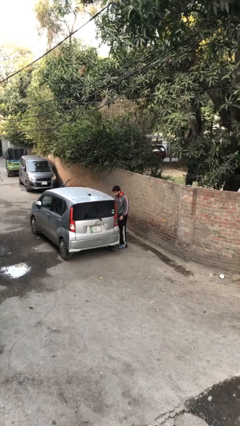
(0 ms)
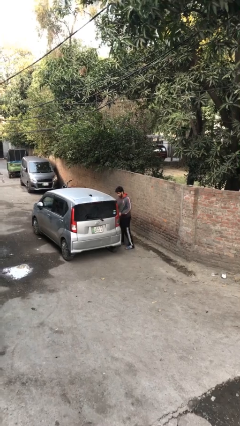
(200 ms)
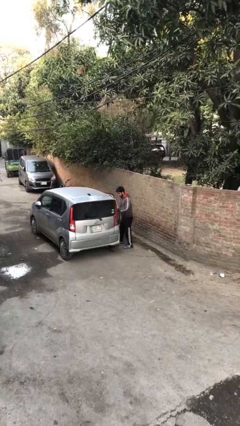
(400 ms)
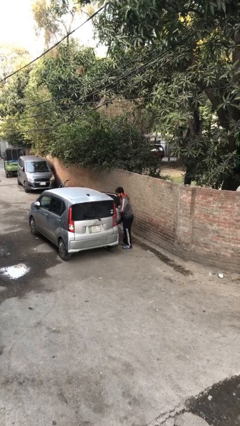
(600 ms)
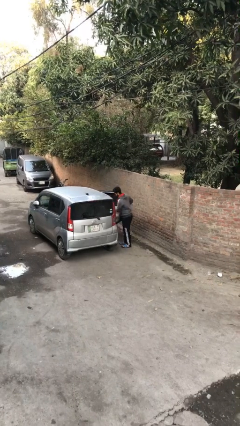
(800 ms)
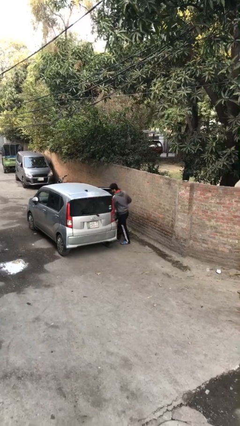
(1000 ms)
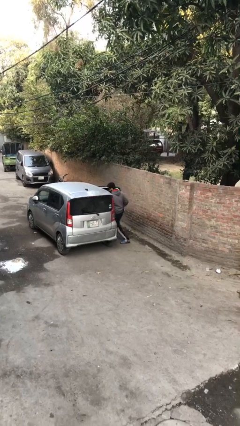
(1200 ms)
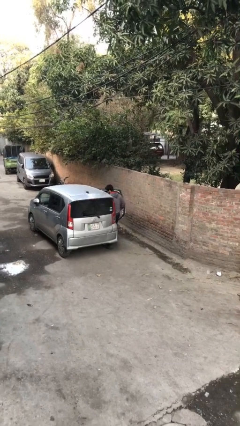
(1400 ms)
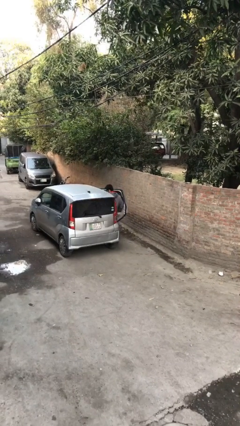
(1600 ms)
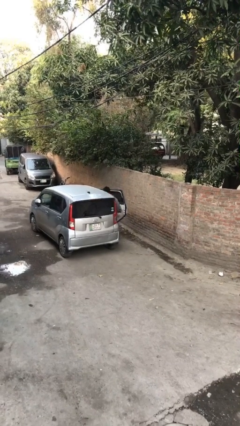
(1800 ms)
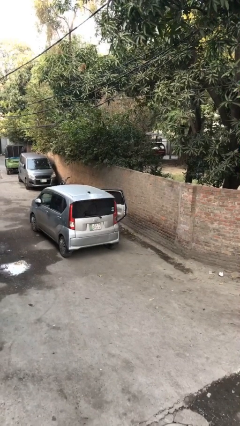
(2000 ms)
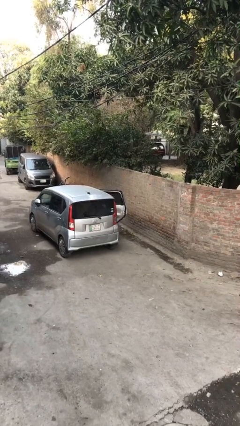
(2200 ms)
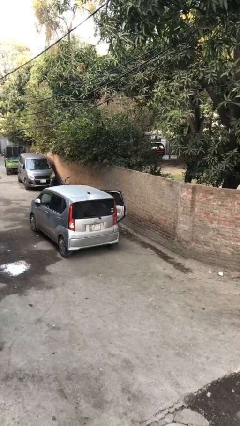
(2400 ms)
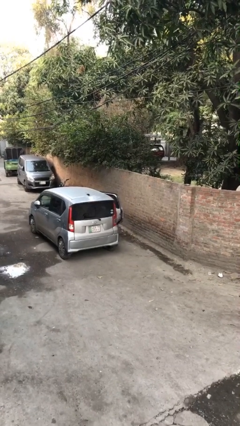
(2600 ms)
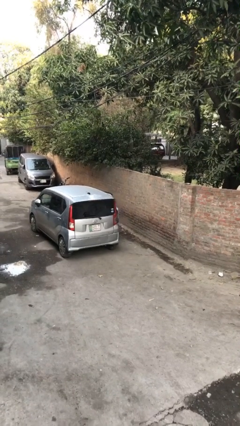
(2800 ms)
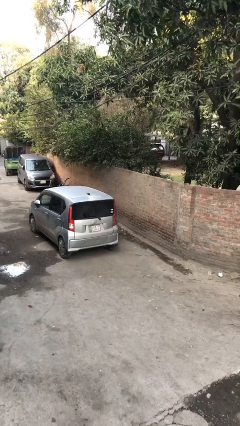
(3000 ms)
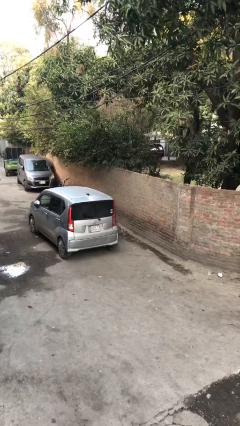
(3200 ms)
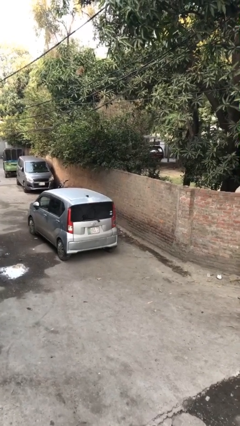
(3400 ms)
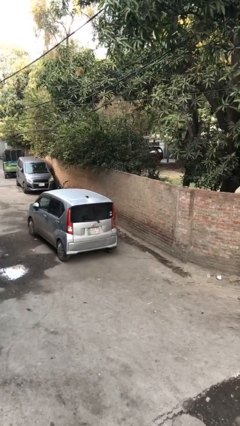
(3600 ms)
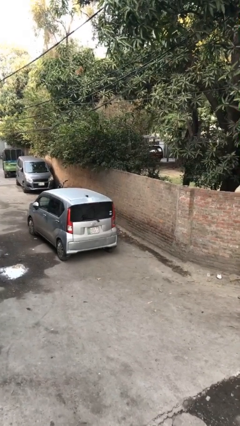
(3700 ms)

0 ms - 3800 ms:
car picks up person

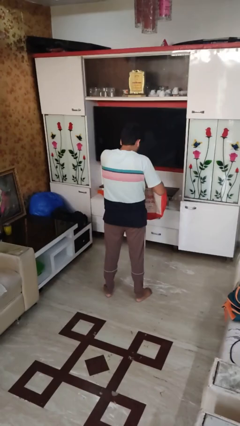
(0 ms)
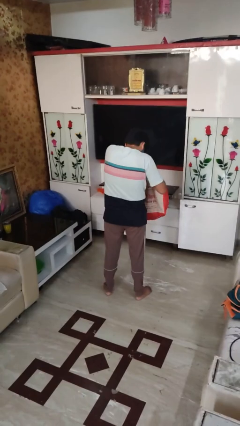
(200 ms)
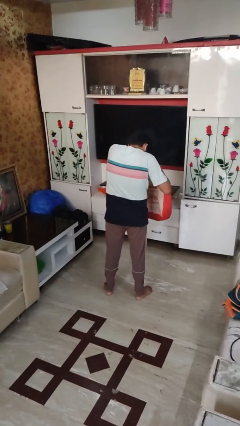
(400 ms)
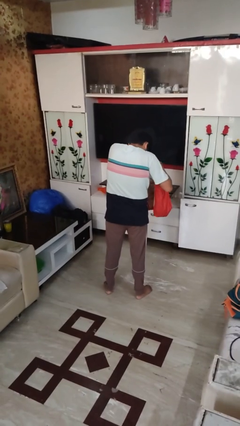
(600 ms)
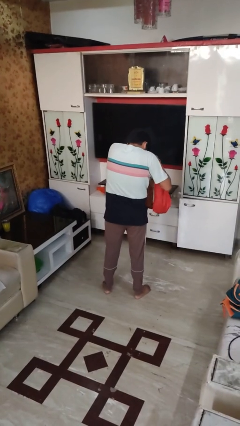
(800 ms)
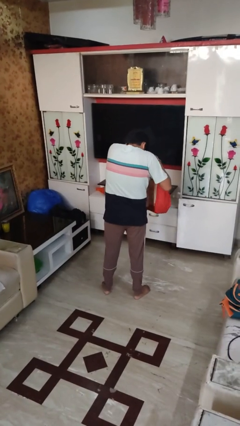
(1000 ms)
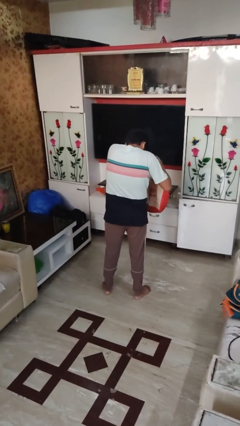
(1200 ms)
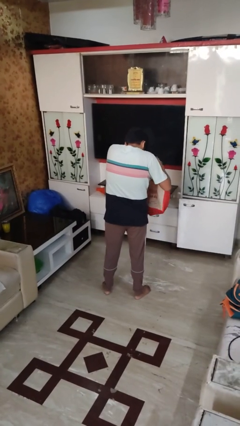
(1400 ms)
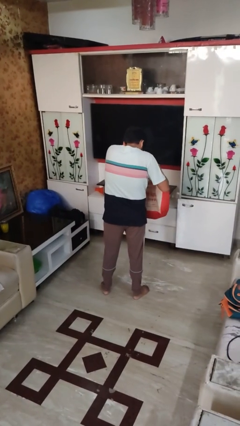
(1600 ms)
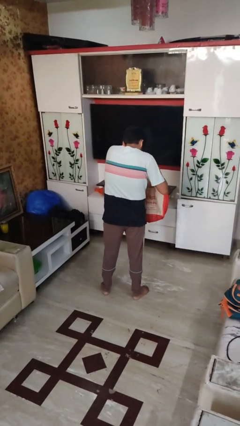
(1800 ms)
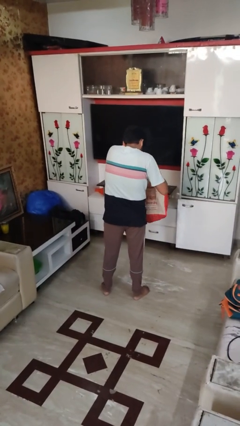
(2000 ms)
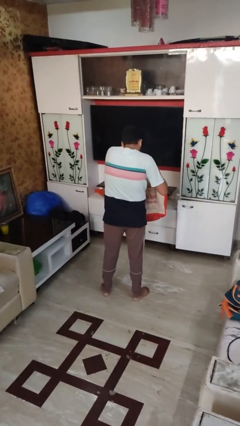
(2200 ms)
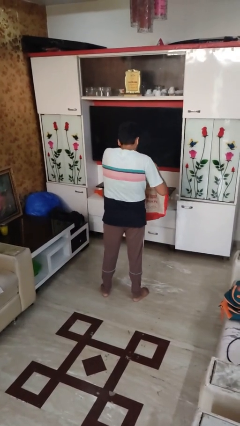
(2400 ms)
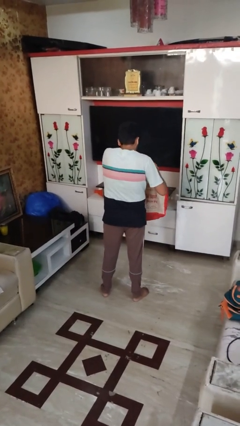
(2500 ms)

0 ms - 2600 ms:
person searches in bag

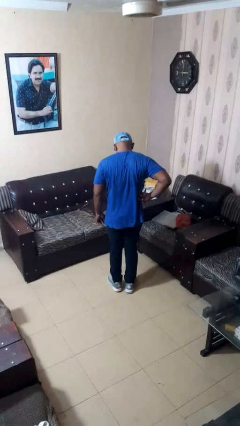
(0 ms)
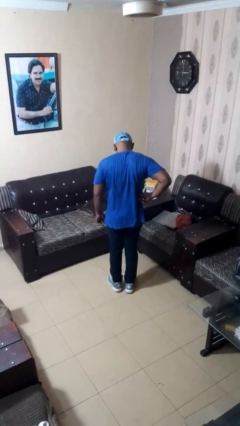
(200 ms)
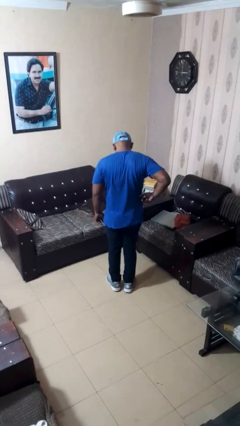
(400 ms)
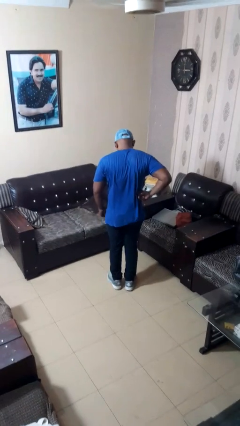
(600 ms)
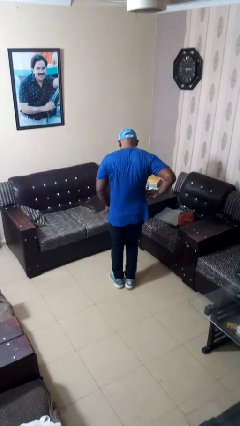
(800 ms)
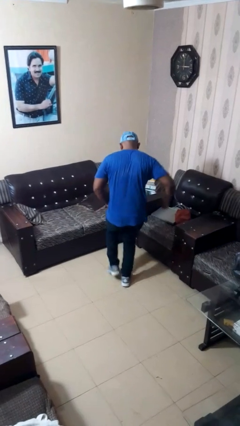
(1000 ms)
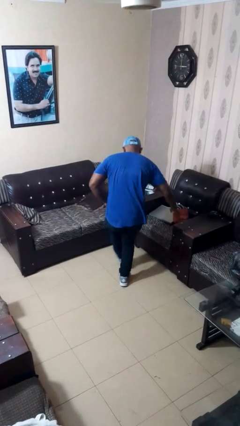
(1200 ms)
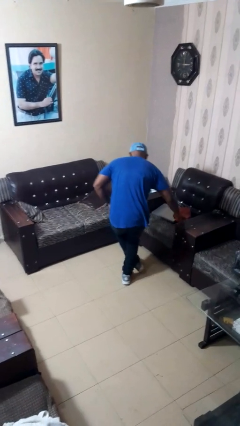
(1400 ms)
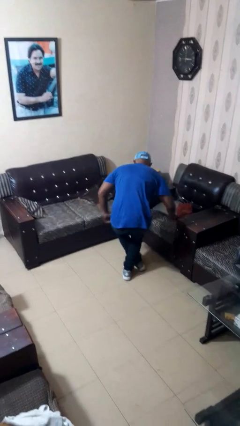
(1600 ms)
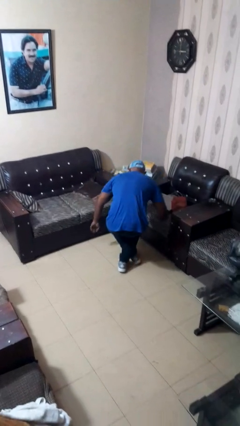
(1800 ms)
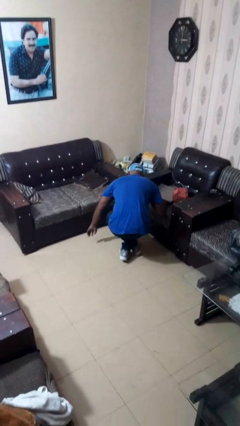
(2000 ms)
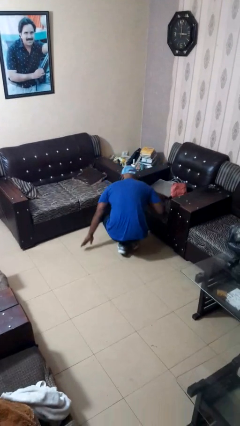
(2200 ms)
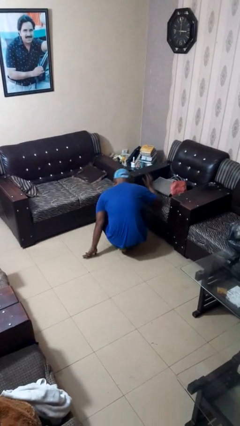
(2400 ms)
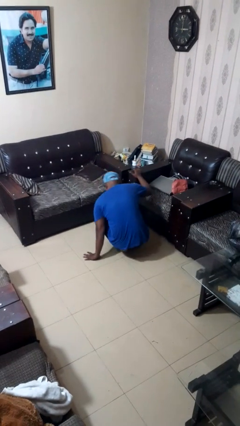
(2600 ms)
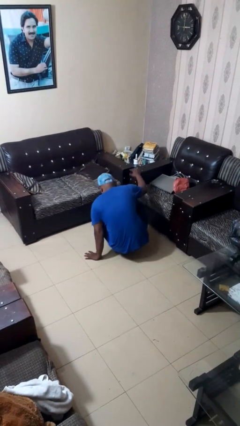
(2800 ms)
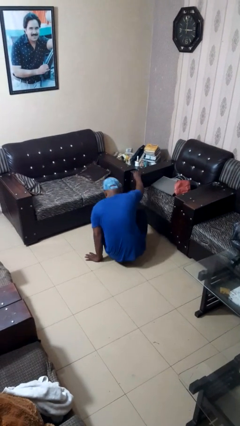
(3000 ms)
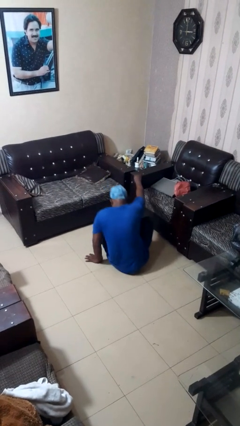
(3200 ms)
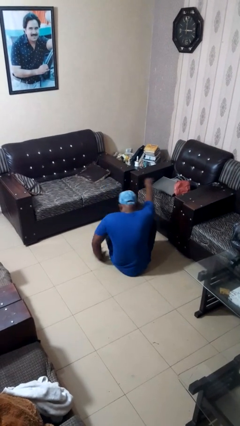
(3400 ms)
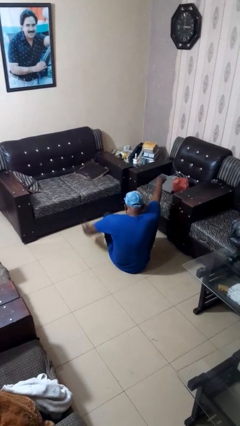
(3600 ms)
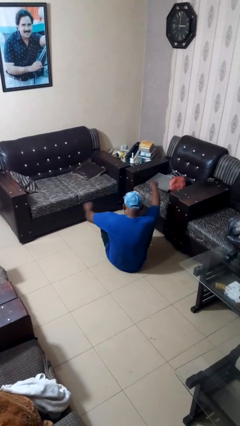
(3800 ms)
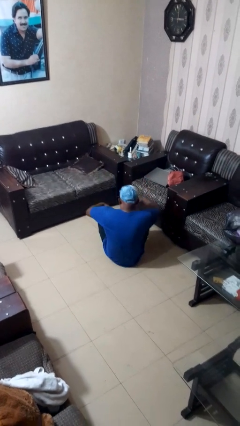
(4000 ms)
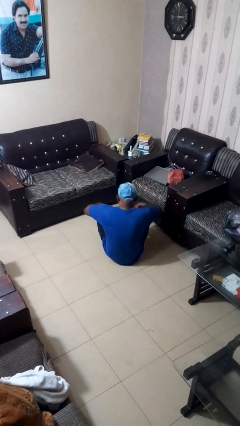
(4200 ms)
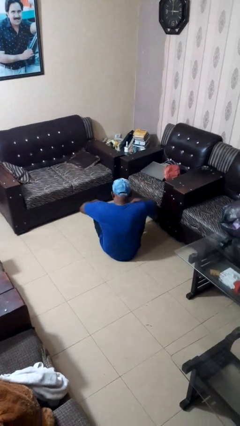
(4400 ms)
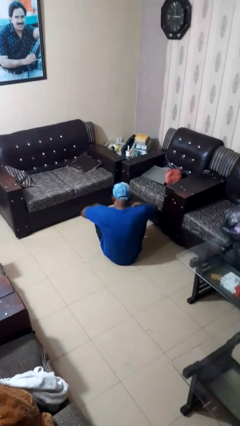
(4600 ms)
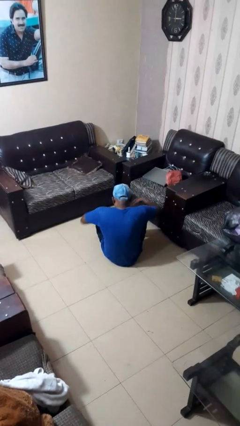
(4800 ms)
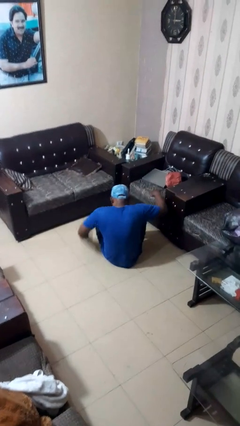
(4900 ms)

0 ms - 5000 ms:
person sits crisscross

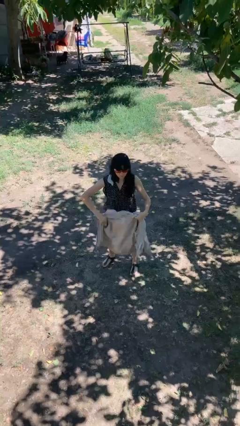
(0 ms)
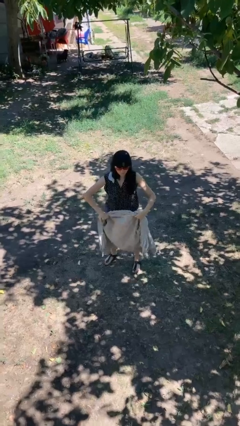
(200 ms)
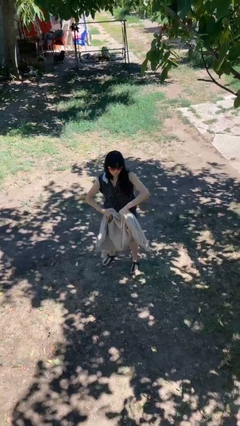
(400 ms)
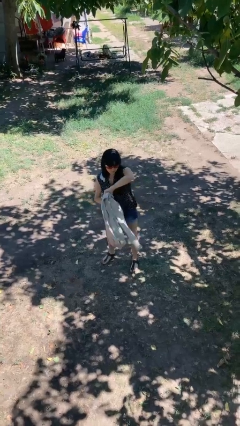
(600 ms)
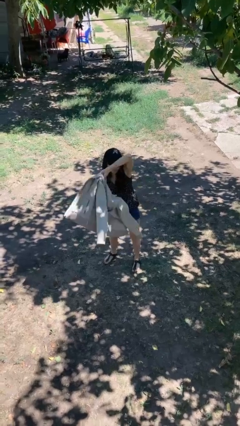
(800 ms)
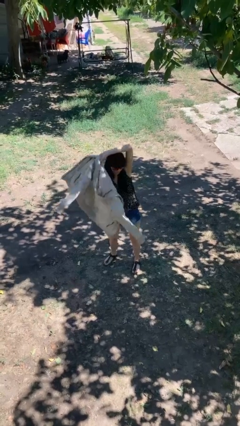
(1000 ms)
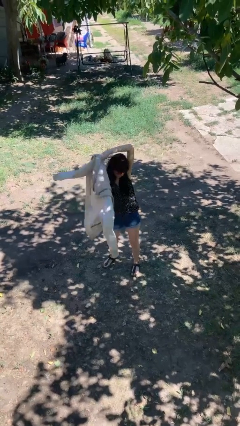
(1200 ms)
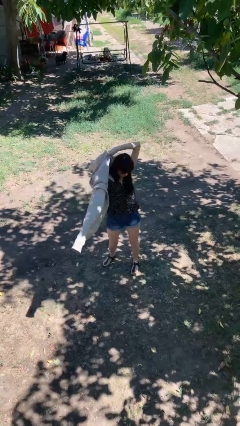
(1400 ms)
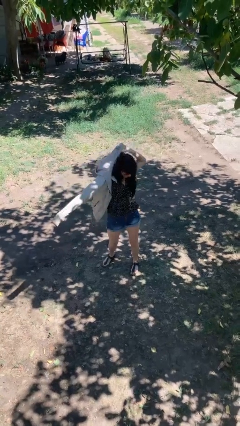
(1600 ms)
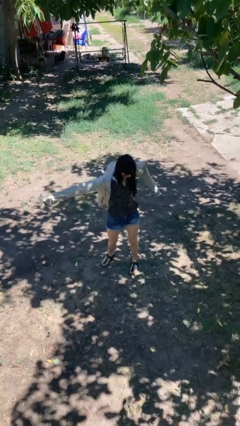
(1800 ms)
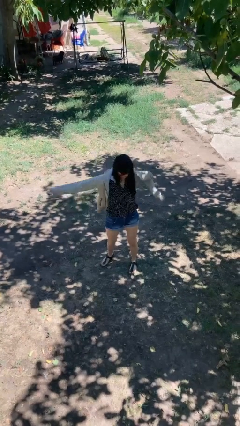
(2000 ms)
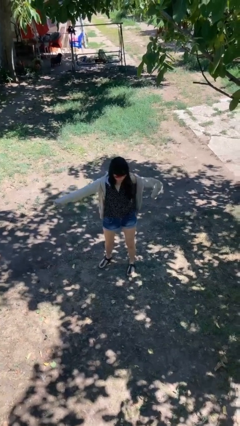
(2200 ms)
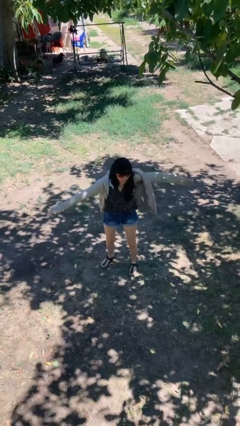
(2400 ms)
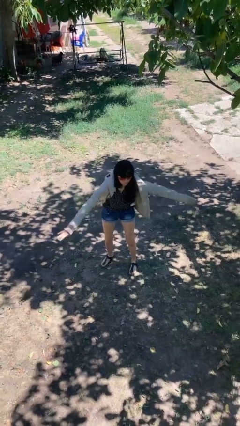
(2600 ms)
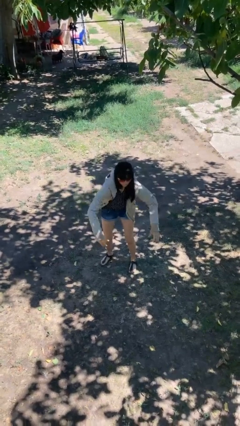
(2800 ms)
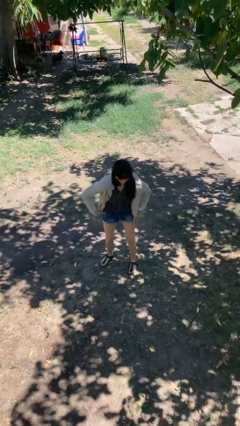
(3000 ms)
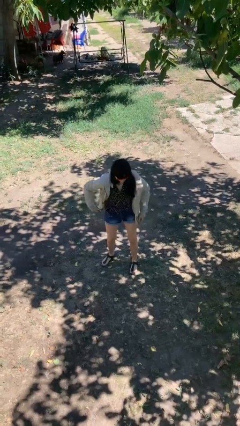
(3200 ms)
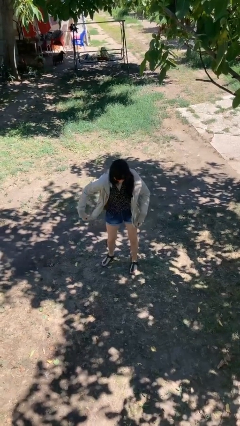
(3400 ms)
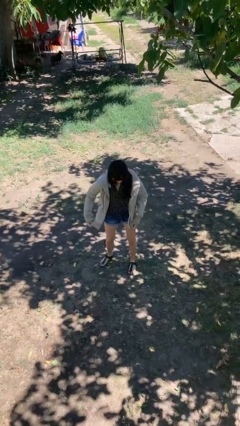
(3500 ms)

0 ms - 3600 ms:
person puts on jacket

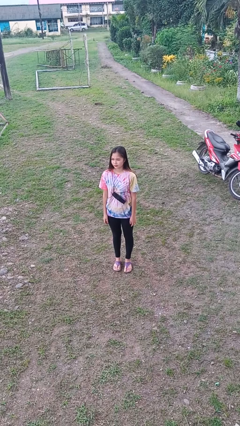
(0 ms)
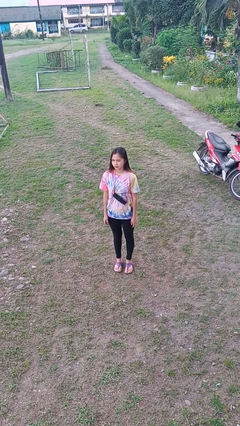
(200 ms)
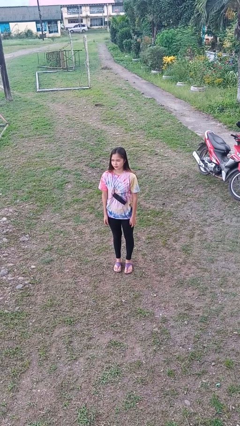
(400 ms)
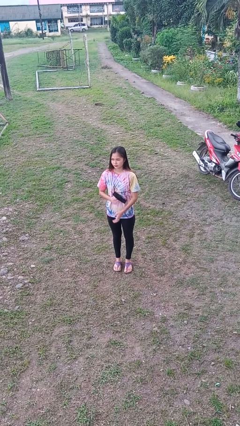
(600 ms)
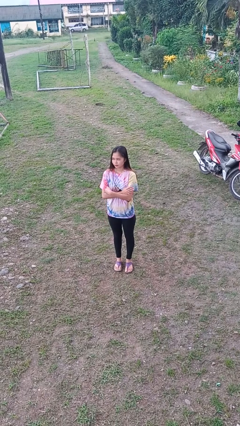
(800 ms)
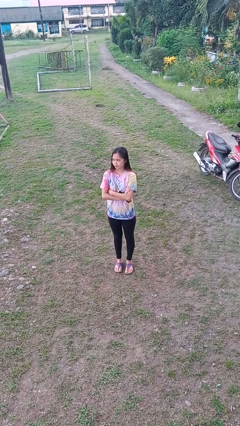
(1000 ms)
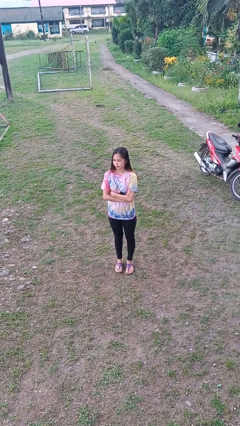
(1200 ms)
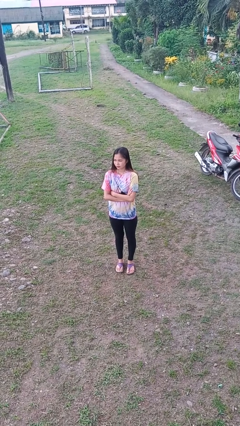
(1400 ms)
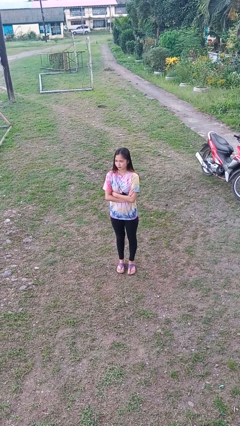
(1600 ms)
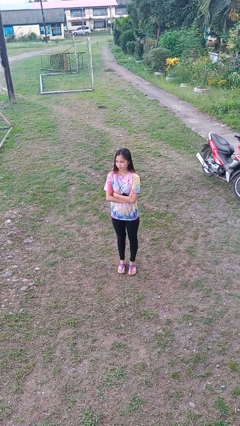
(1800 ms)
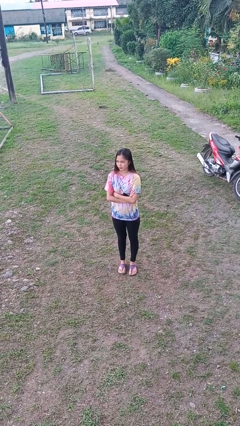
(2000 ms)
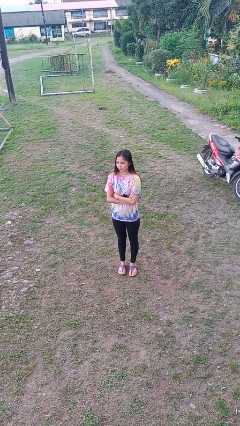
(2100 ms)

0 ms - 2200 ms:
person crosses arms

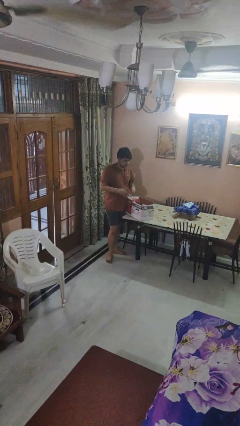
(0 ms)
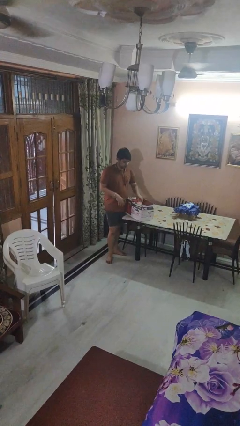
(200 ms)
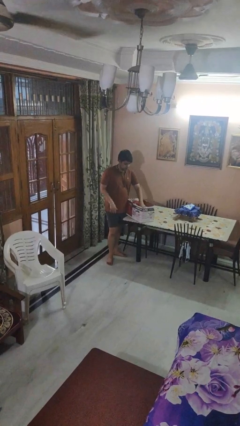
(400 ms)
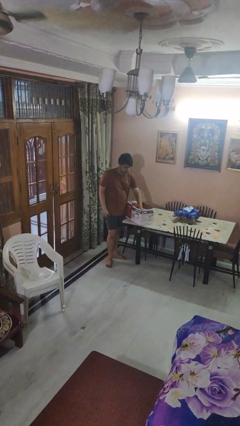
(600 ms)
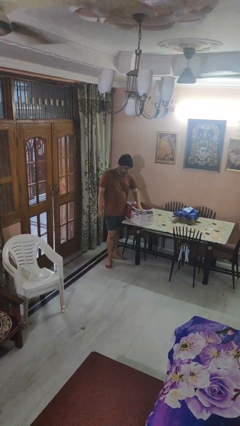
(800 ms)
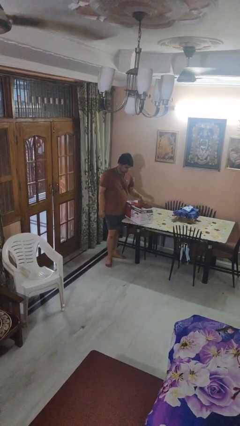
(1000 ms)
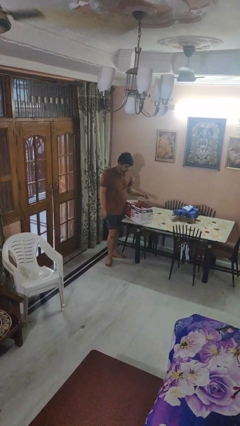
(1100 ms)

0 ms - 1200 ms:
person puts object into box
